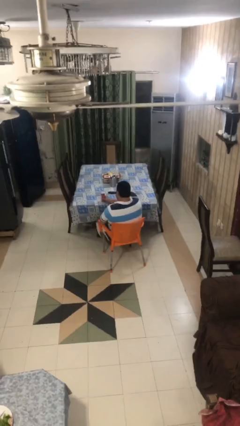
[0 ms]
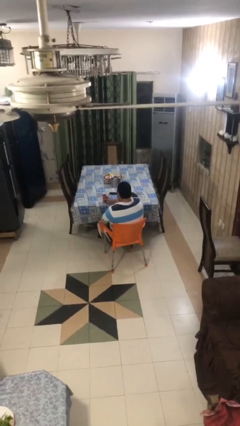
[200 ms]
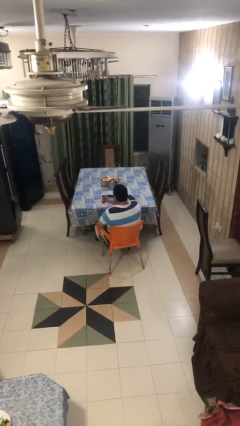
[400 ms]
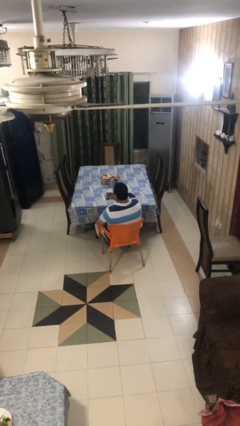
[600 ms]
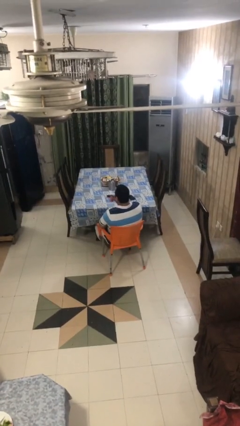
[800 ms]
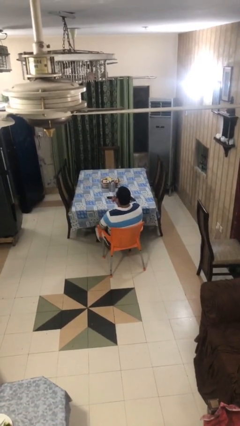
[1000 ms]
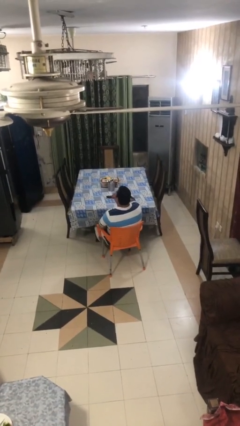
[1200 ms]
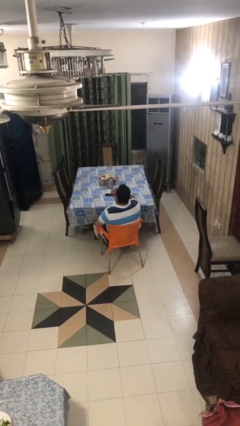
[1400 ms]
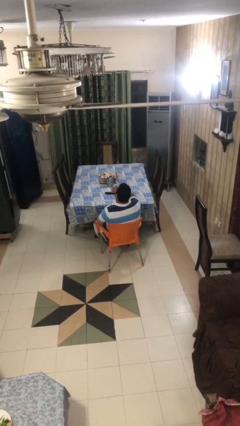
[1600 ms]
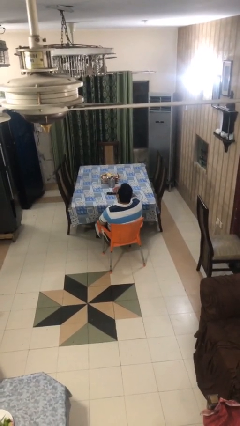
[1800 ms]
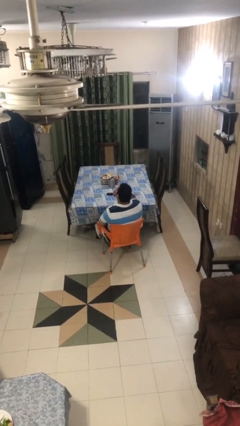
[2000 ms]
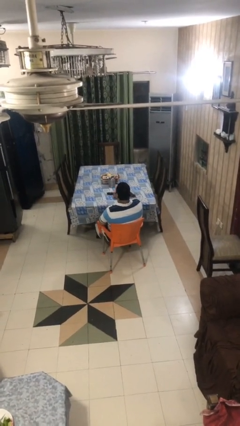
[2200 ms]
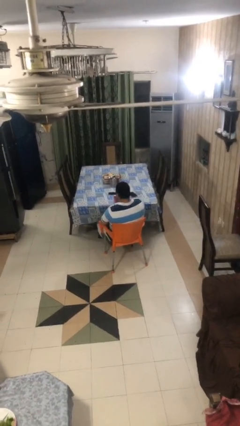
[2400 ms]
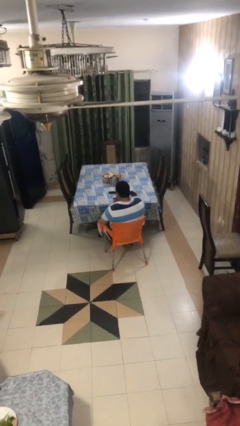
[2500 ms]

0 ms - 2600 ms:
person drinks from beverage can

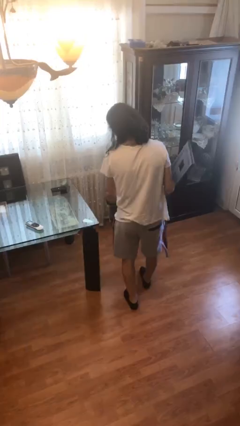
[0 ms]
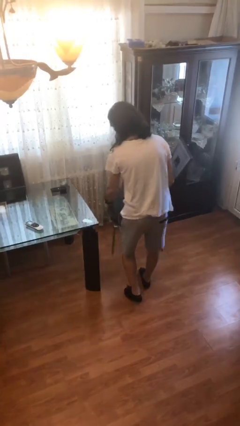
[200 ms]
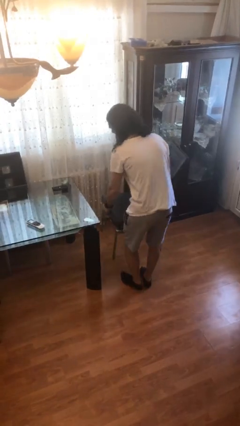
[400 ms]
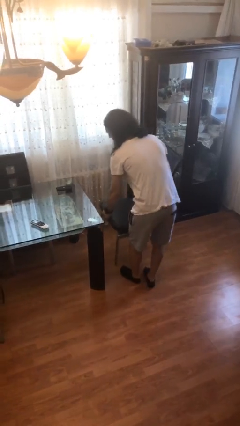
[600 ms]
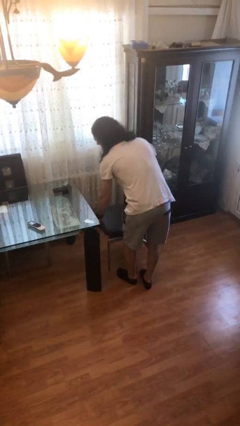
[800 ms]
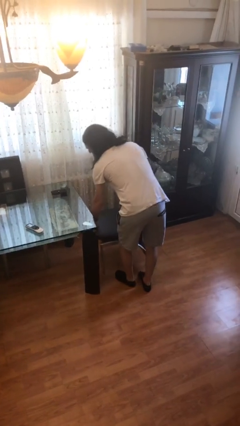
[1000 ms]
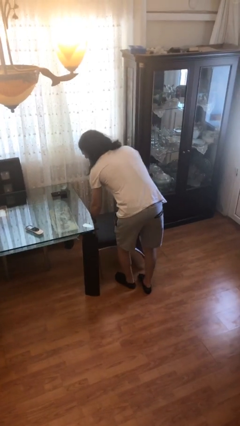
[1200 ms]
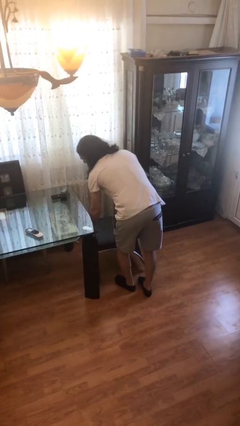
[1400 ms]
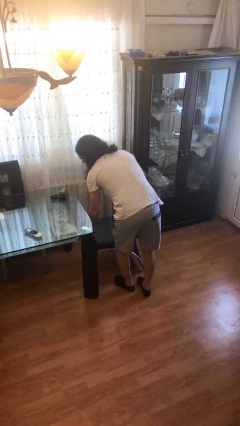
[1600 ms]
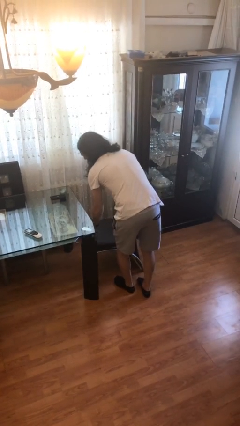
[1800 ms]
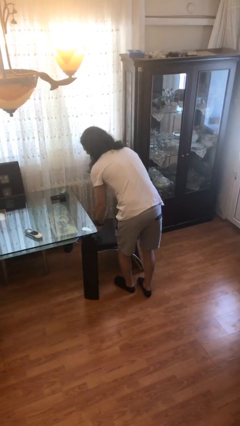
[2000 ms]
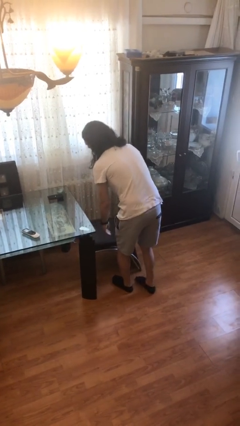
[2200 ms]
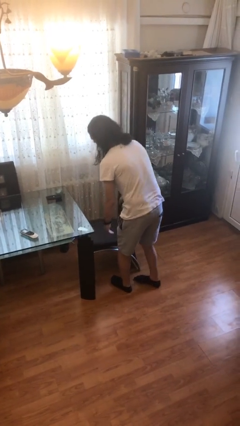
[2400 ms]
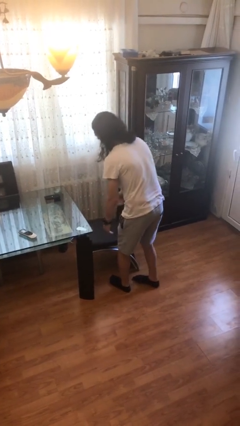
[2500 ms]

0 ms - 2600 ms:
person puts down object on floor

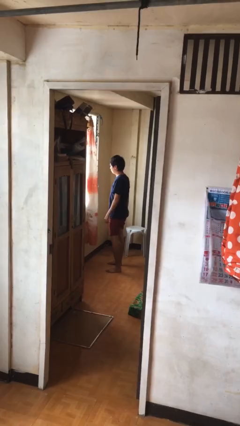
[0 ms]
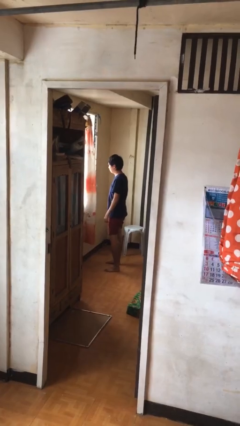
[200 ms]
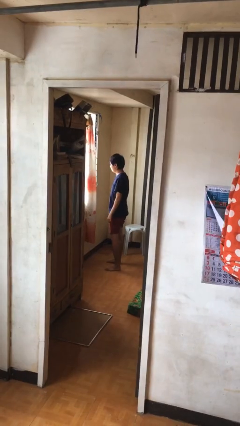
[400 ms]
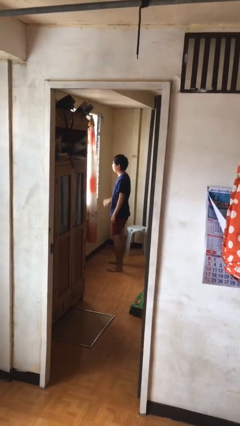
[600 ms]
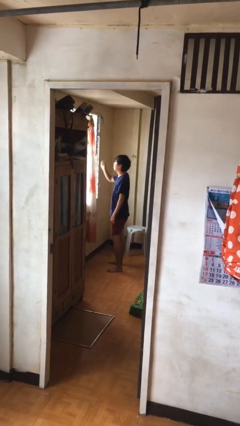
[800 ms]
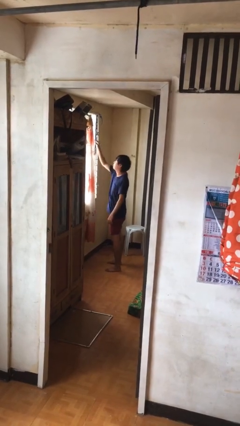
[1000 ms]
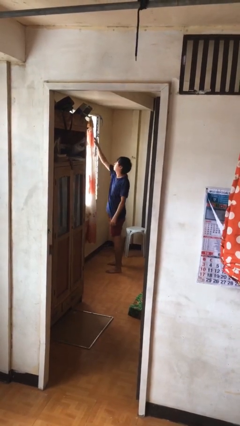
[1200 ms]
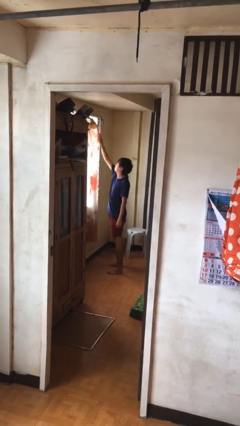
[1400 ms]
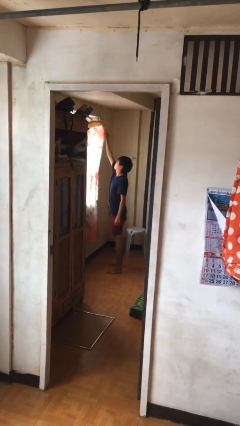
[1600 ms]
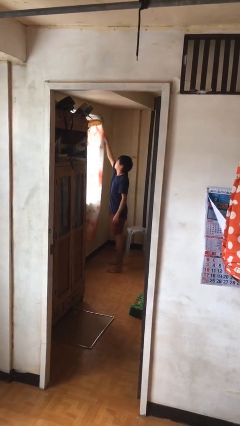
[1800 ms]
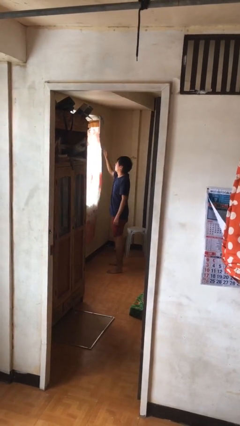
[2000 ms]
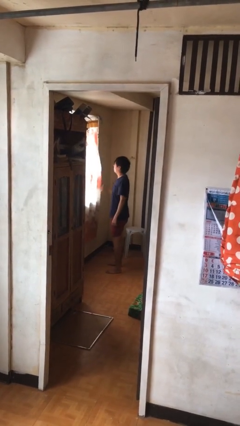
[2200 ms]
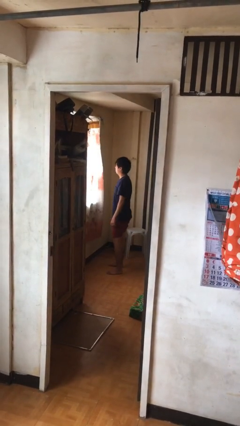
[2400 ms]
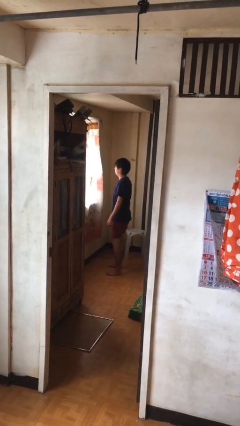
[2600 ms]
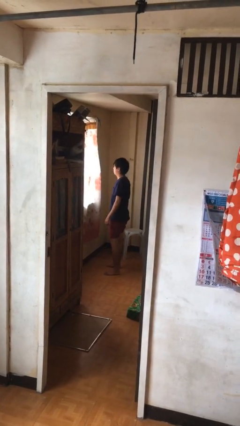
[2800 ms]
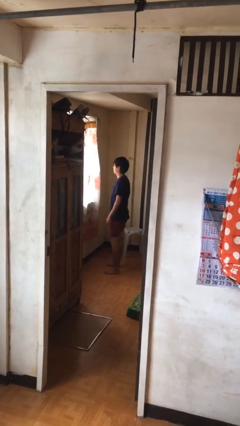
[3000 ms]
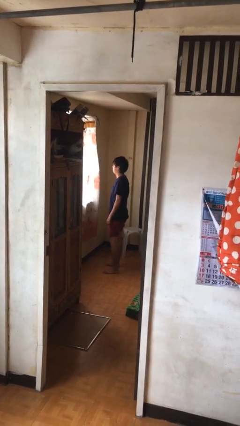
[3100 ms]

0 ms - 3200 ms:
person closes curtains

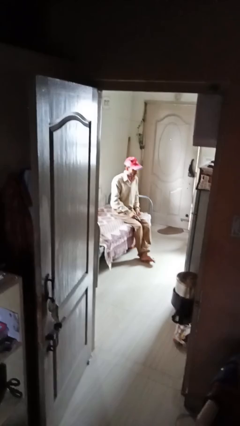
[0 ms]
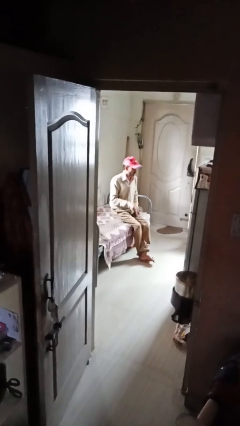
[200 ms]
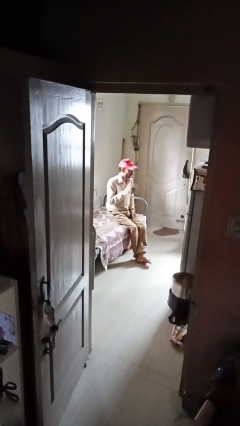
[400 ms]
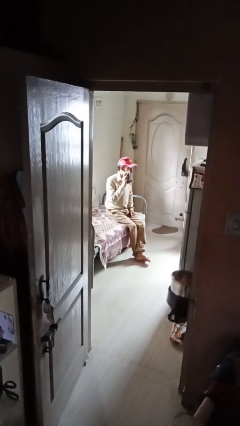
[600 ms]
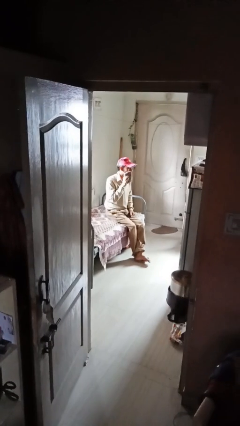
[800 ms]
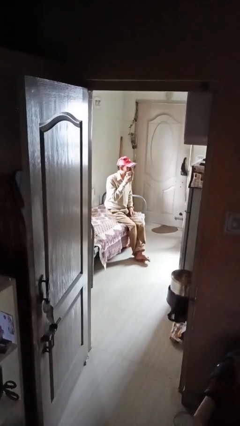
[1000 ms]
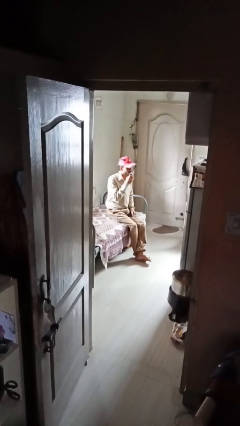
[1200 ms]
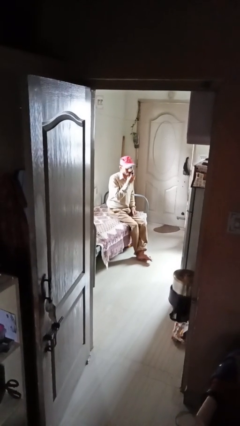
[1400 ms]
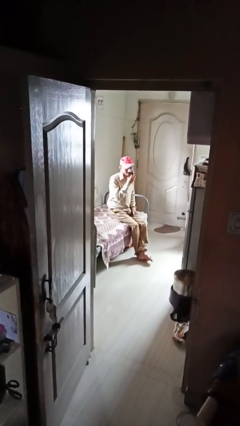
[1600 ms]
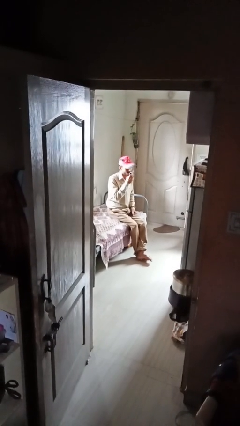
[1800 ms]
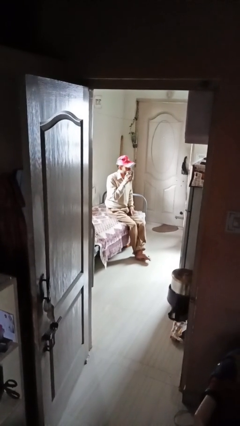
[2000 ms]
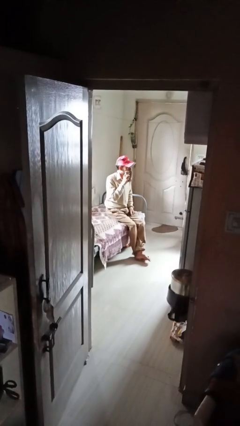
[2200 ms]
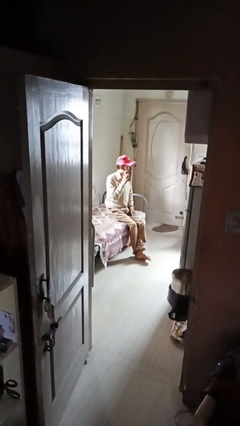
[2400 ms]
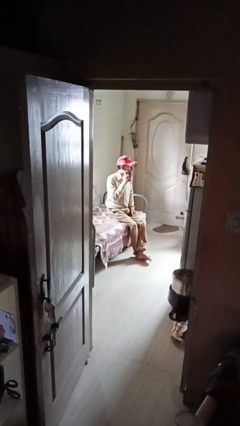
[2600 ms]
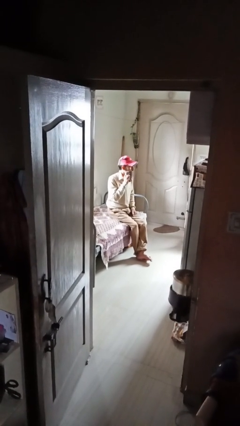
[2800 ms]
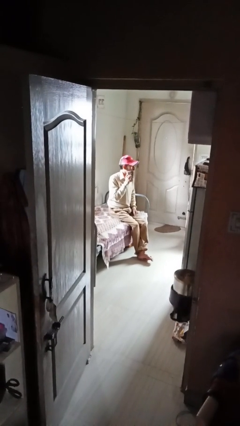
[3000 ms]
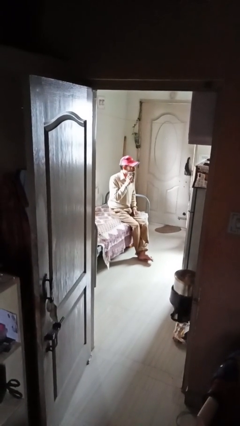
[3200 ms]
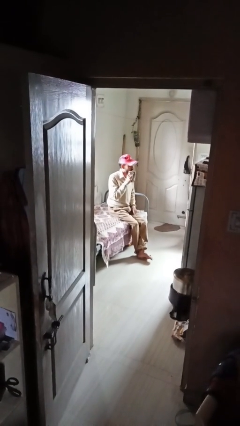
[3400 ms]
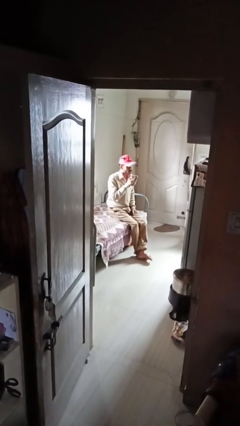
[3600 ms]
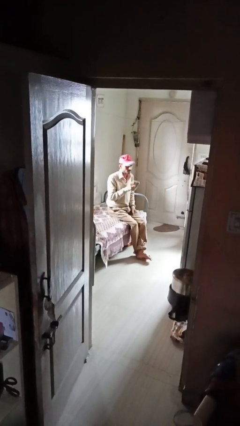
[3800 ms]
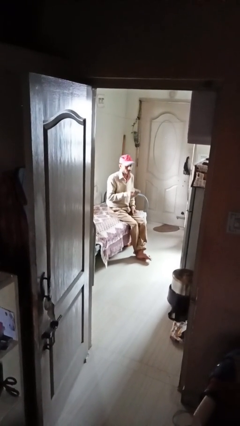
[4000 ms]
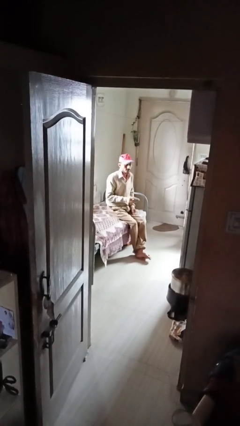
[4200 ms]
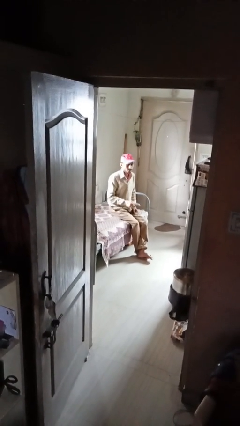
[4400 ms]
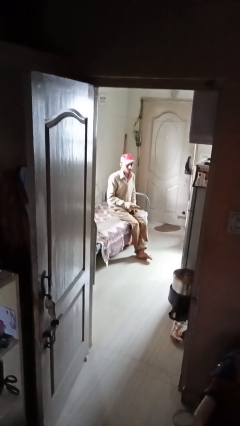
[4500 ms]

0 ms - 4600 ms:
person wipes mouth with napkin

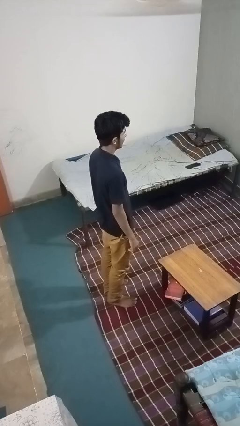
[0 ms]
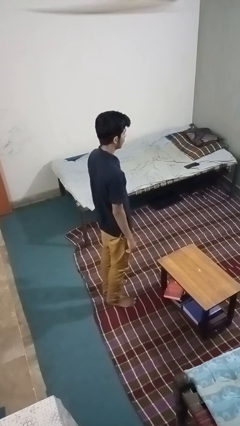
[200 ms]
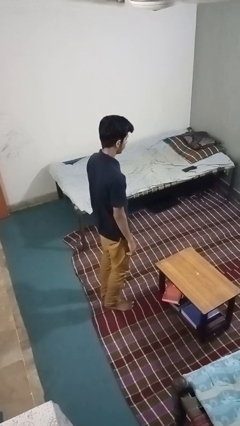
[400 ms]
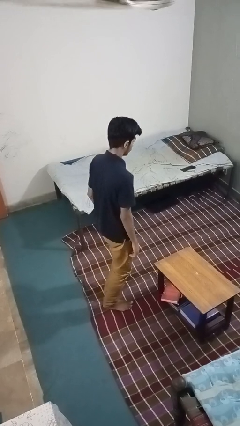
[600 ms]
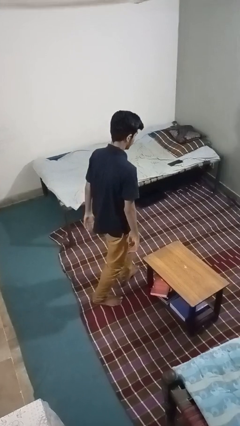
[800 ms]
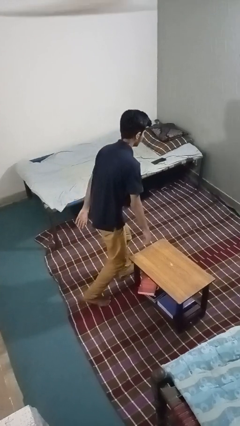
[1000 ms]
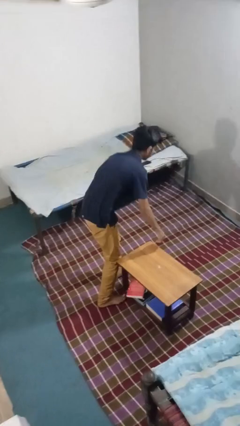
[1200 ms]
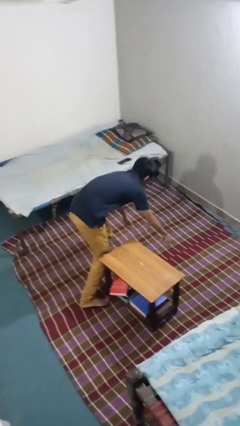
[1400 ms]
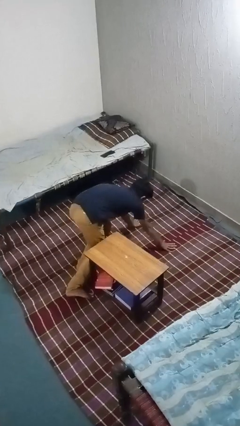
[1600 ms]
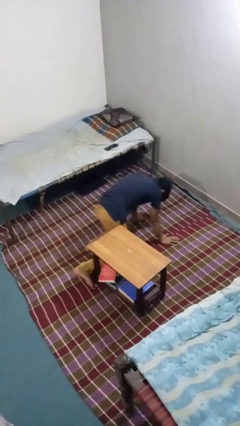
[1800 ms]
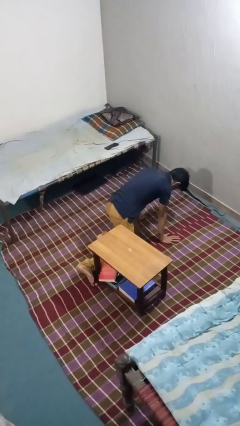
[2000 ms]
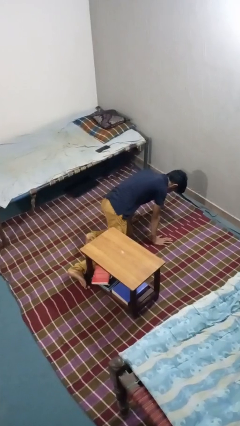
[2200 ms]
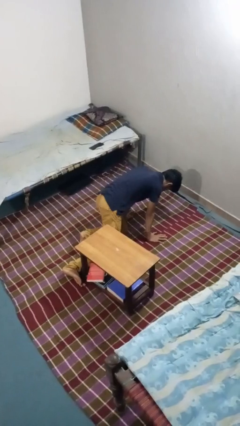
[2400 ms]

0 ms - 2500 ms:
person trips on object on floor

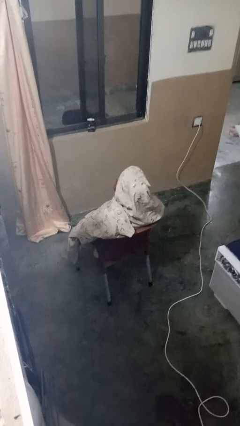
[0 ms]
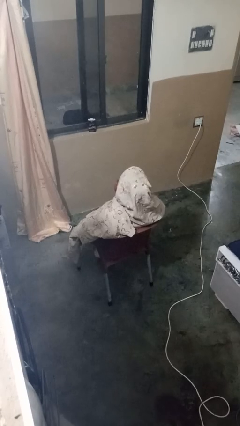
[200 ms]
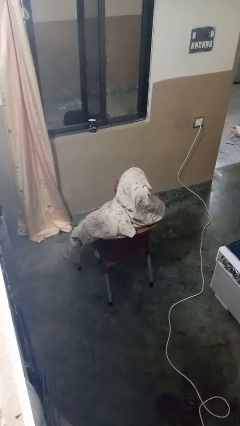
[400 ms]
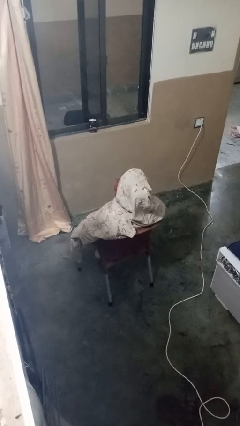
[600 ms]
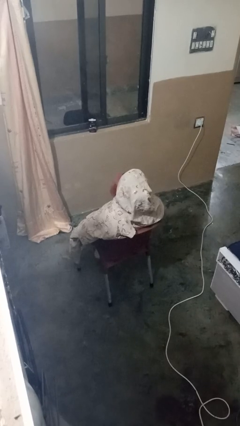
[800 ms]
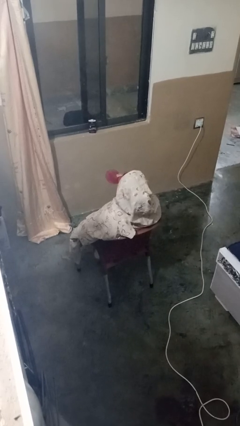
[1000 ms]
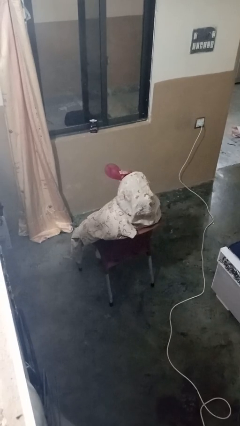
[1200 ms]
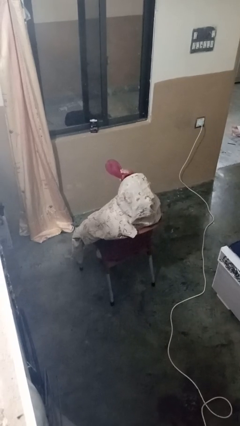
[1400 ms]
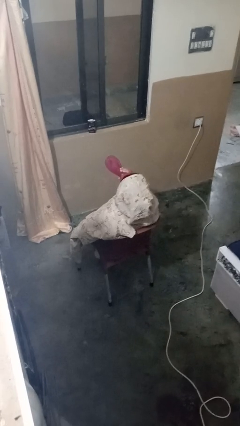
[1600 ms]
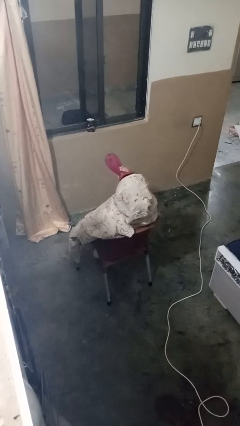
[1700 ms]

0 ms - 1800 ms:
person drinks from bottle
